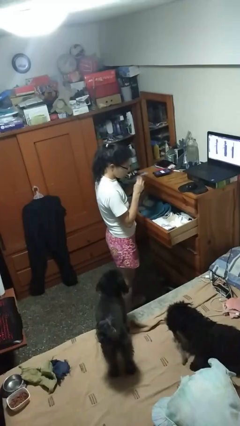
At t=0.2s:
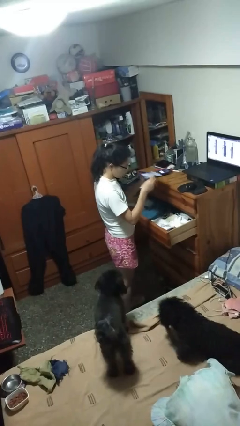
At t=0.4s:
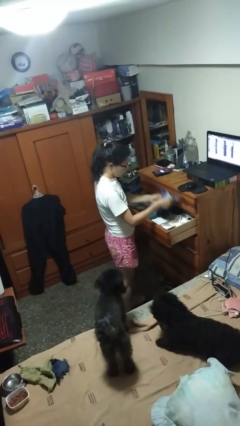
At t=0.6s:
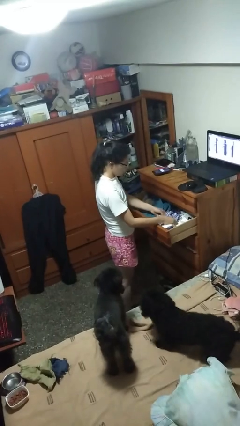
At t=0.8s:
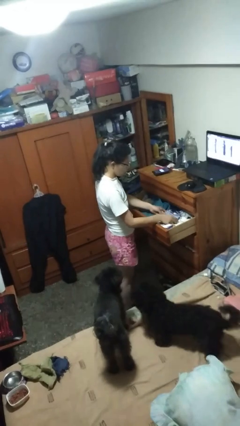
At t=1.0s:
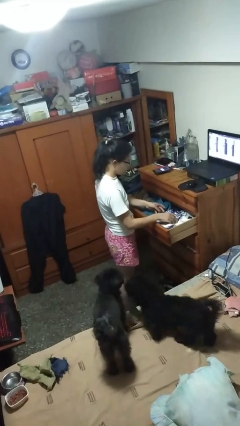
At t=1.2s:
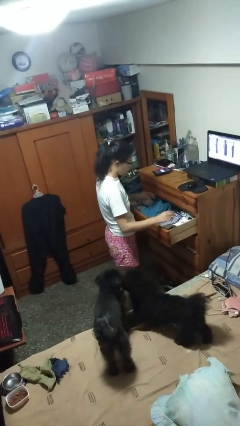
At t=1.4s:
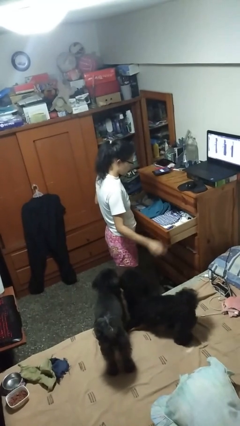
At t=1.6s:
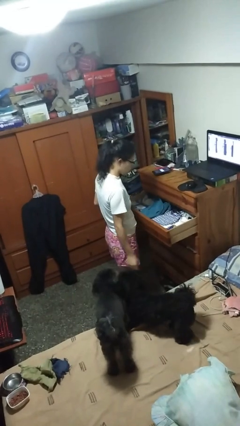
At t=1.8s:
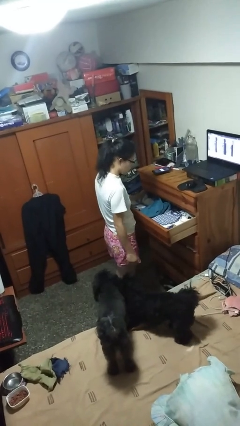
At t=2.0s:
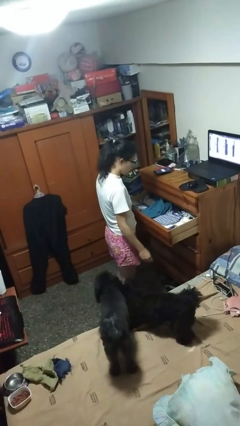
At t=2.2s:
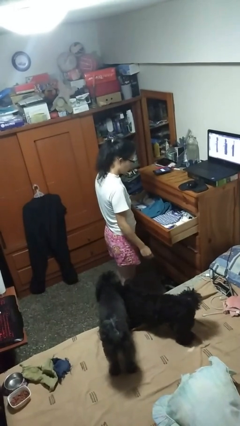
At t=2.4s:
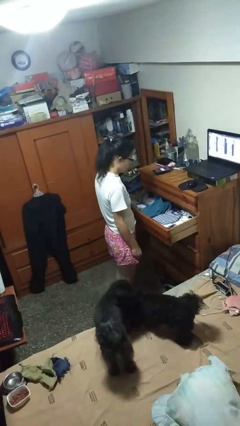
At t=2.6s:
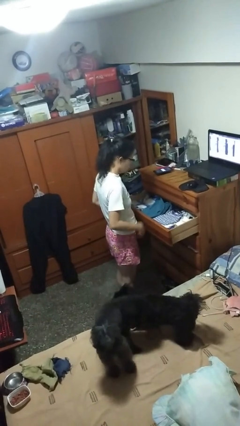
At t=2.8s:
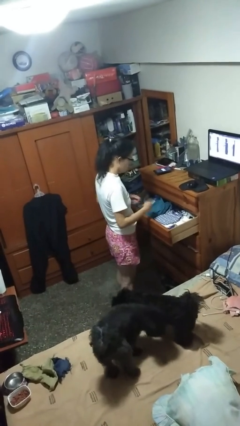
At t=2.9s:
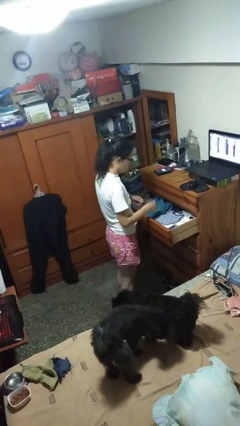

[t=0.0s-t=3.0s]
person puts clothes into dresser

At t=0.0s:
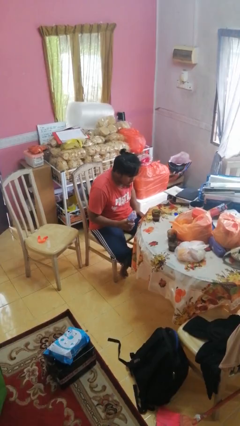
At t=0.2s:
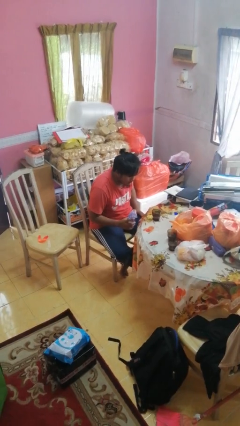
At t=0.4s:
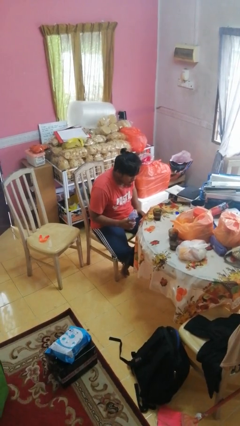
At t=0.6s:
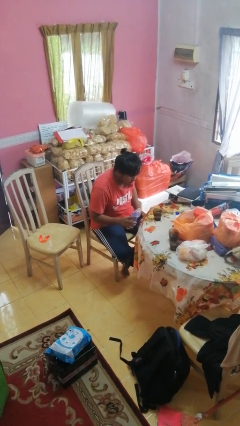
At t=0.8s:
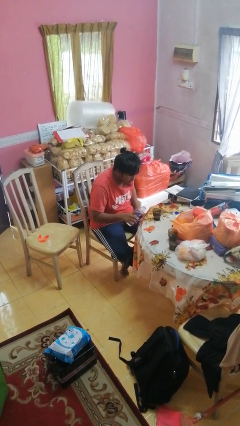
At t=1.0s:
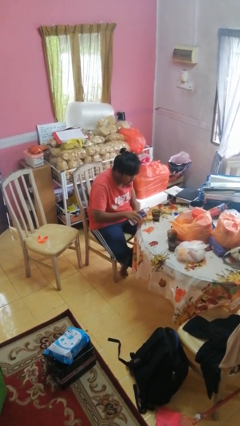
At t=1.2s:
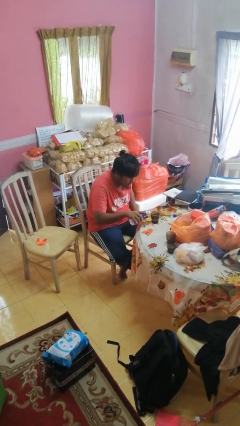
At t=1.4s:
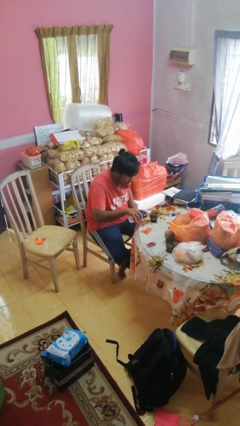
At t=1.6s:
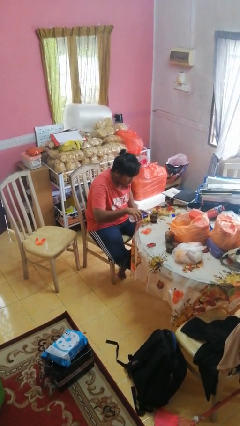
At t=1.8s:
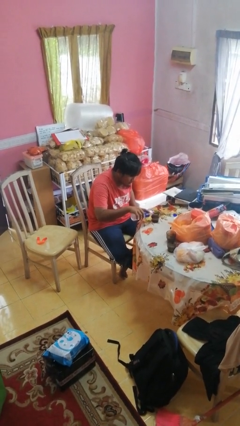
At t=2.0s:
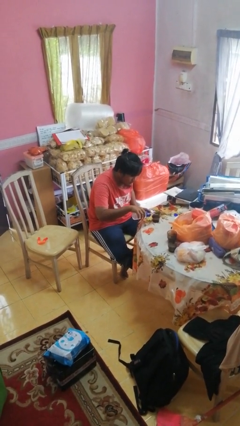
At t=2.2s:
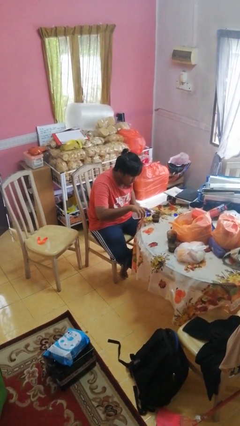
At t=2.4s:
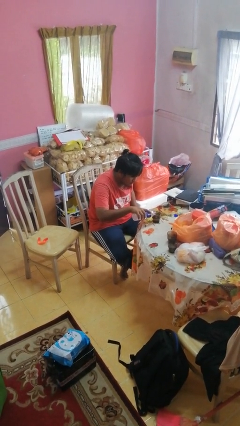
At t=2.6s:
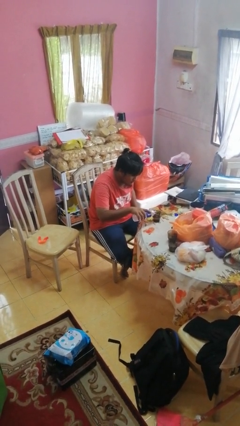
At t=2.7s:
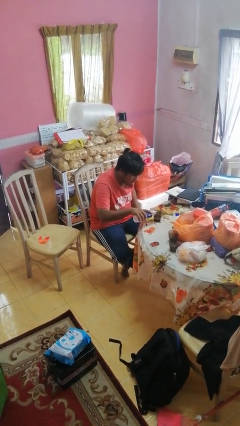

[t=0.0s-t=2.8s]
person pours liquid into cup

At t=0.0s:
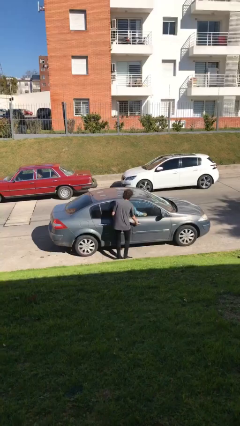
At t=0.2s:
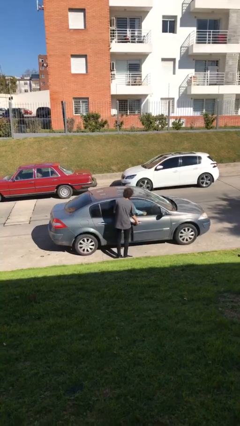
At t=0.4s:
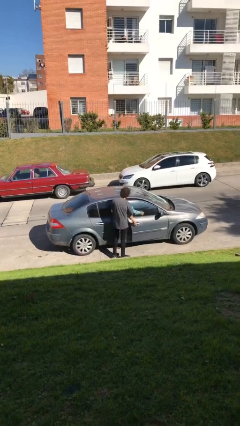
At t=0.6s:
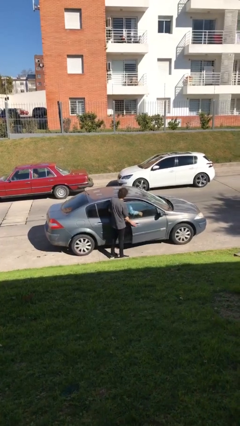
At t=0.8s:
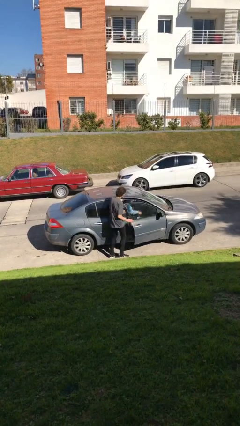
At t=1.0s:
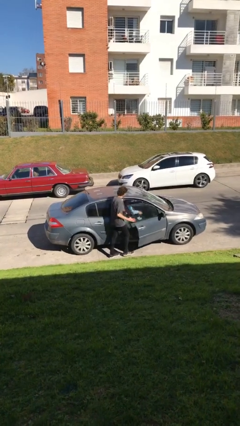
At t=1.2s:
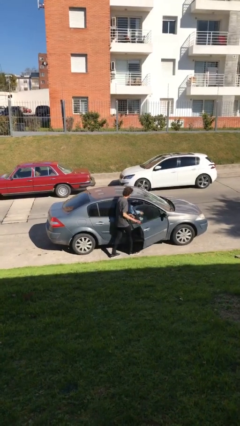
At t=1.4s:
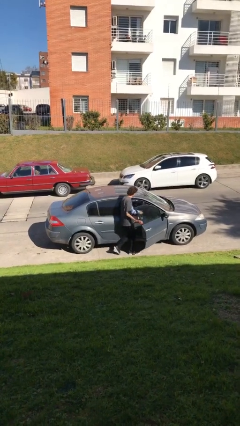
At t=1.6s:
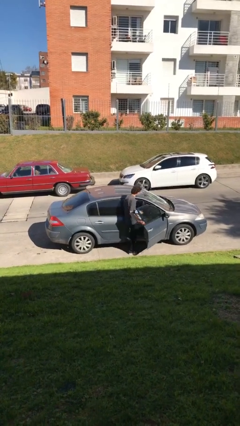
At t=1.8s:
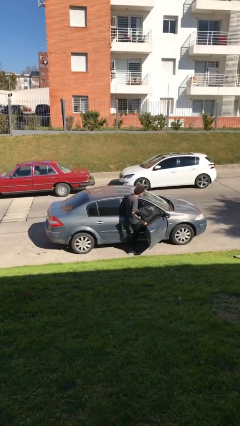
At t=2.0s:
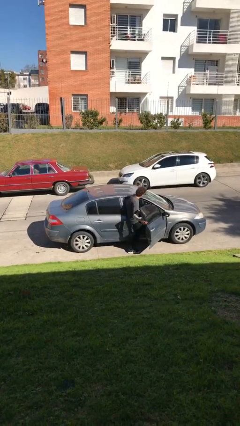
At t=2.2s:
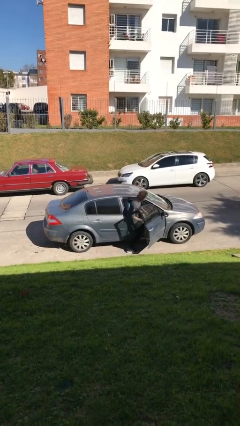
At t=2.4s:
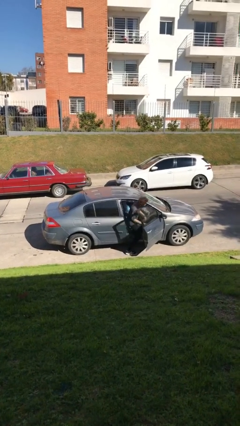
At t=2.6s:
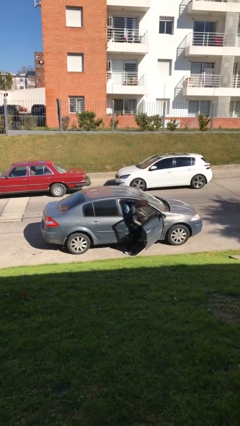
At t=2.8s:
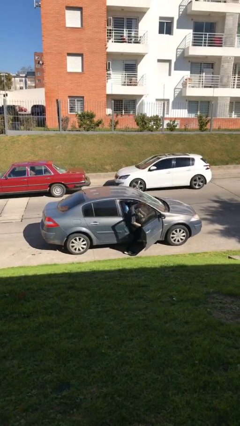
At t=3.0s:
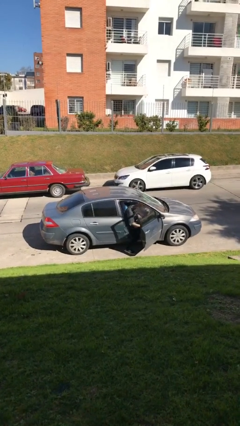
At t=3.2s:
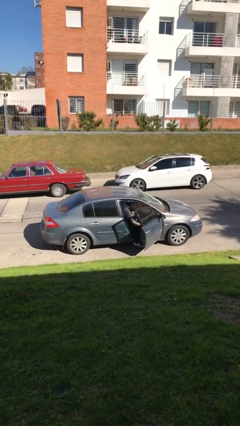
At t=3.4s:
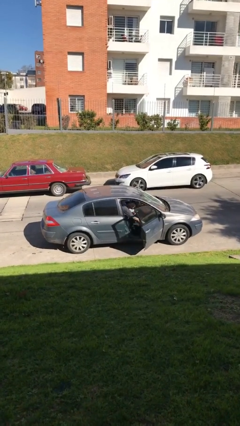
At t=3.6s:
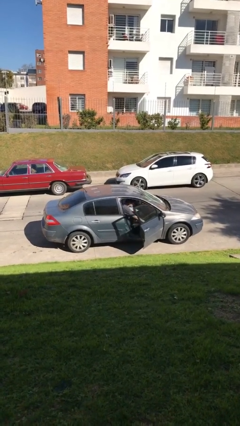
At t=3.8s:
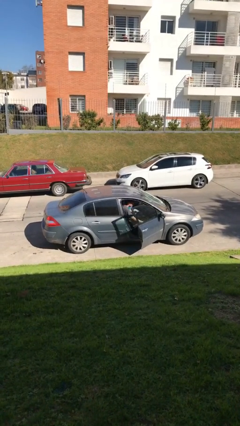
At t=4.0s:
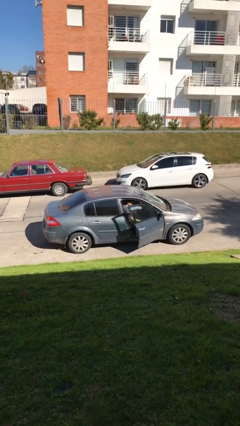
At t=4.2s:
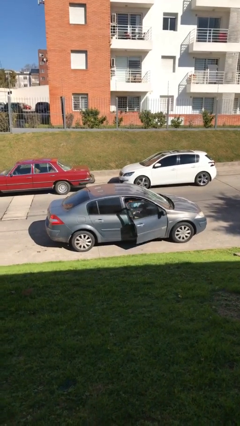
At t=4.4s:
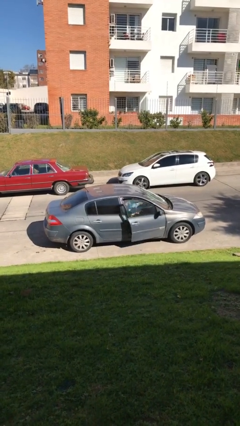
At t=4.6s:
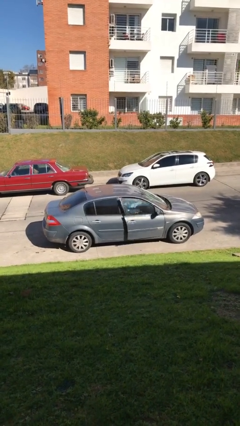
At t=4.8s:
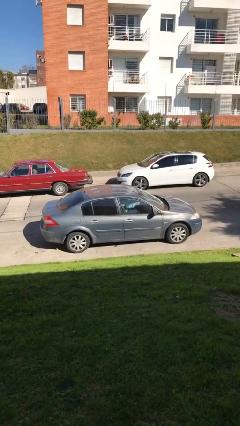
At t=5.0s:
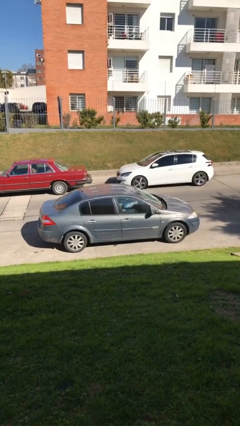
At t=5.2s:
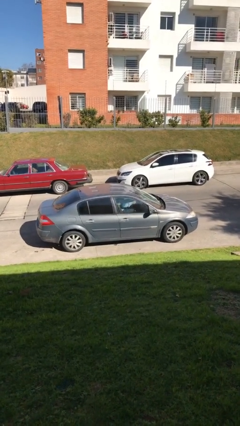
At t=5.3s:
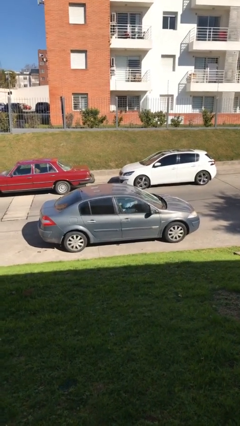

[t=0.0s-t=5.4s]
car picks up person

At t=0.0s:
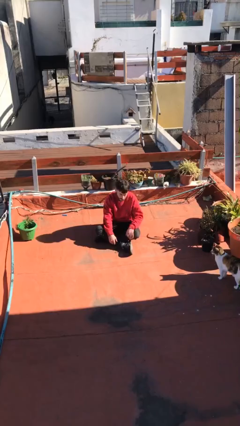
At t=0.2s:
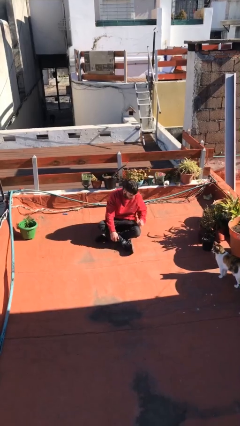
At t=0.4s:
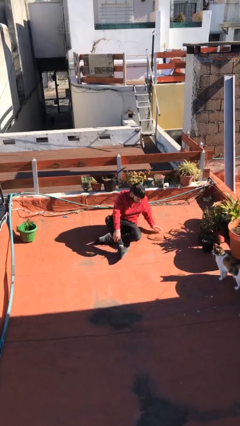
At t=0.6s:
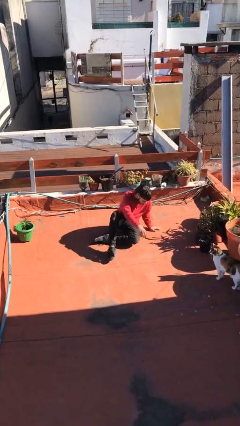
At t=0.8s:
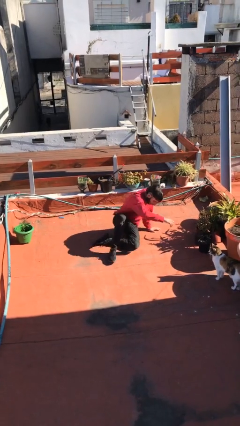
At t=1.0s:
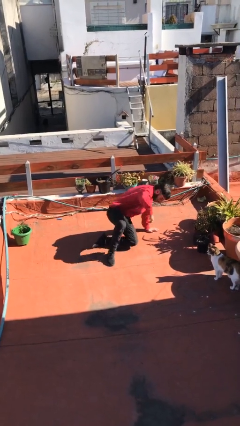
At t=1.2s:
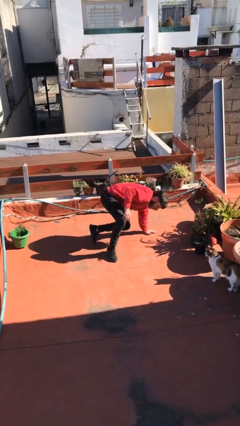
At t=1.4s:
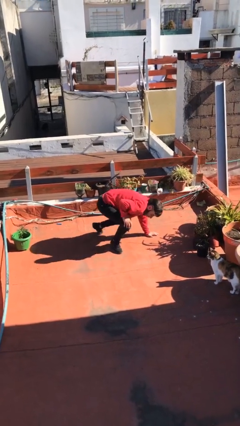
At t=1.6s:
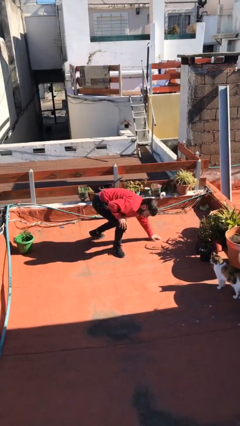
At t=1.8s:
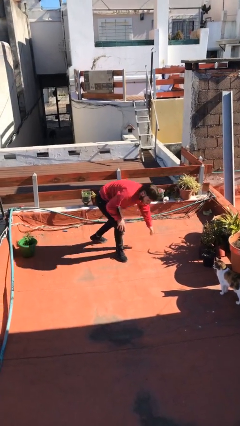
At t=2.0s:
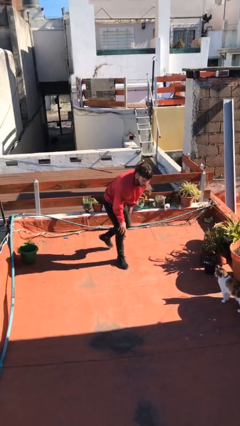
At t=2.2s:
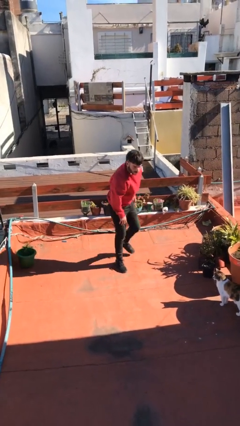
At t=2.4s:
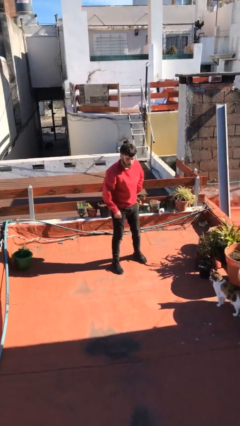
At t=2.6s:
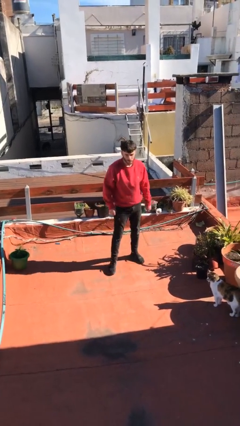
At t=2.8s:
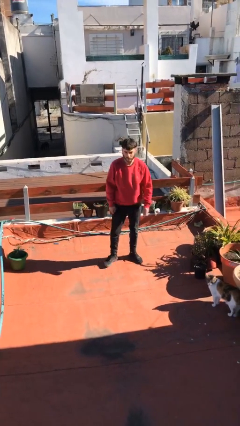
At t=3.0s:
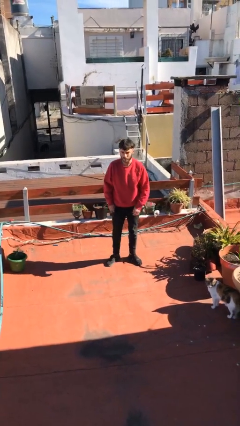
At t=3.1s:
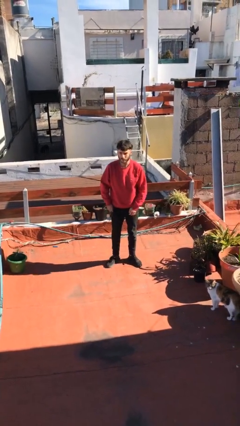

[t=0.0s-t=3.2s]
person stands up from floor

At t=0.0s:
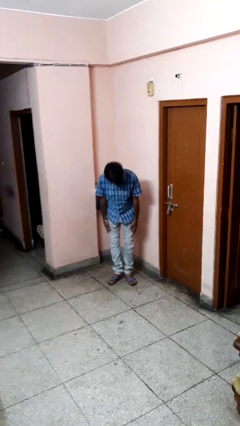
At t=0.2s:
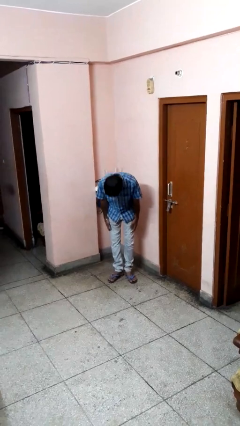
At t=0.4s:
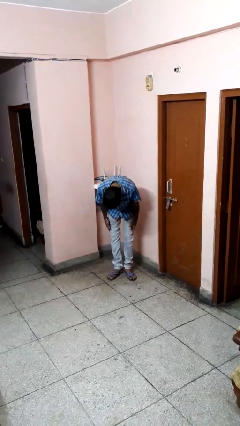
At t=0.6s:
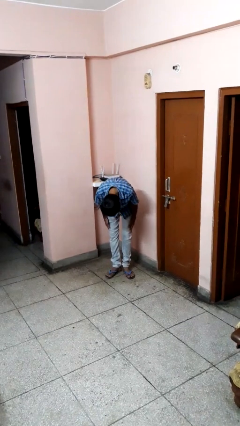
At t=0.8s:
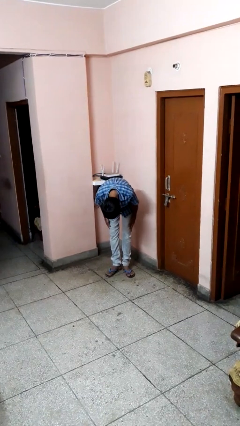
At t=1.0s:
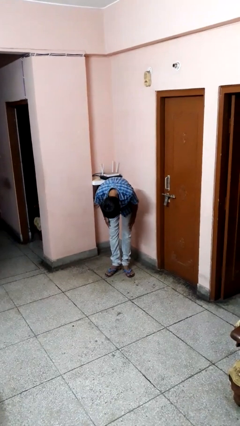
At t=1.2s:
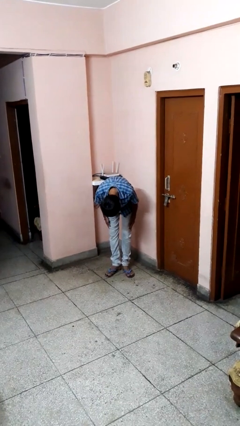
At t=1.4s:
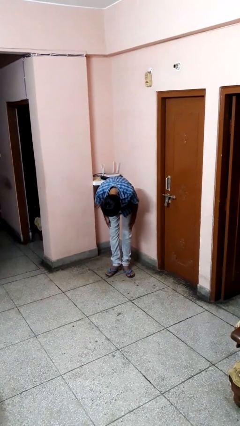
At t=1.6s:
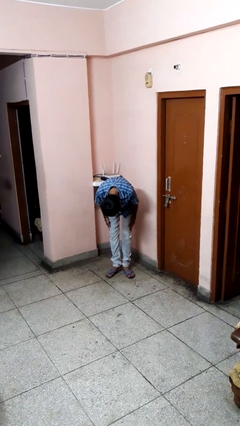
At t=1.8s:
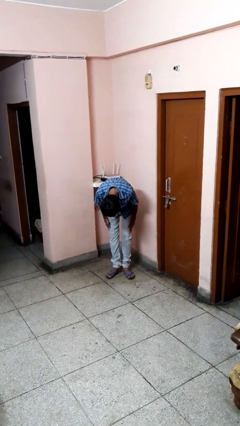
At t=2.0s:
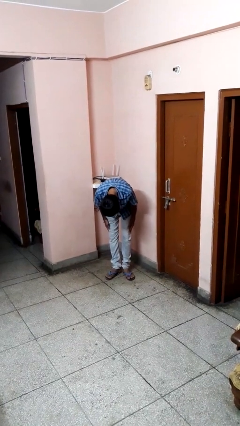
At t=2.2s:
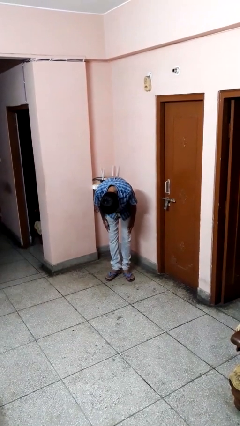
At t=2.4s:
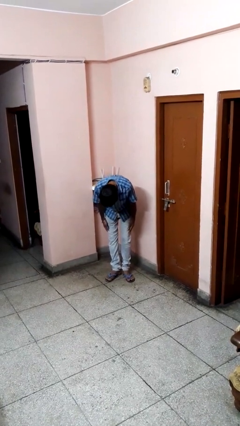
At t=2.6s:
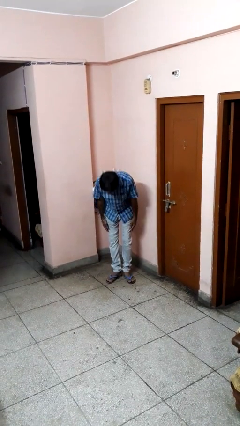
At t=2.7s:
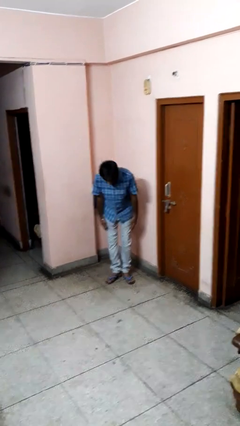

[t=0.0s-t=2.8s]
person bows
